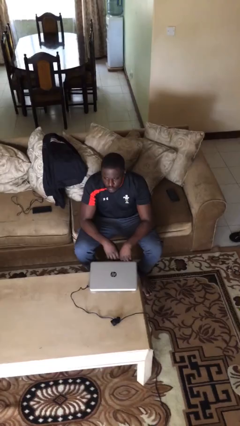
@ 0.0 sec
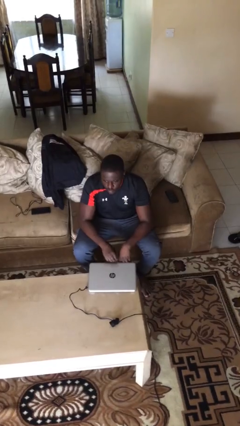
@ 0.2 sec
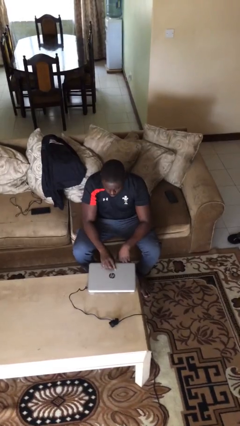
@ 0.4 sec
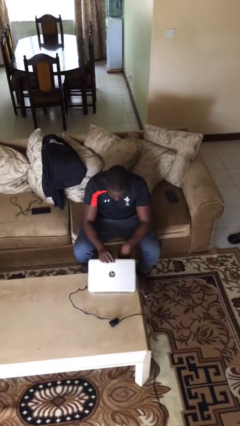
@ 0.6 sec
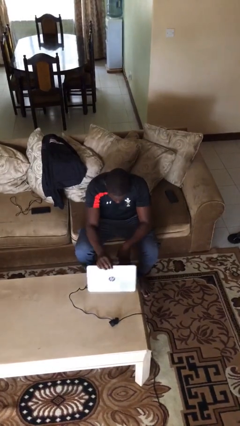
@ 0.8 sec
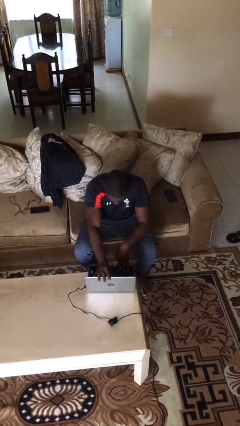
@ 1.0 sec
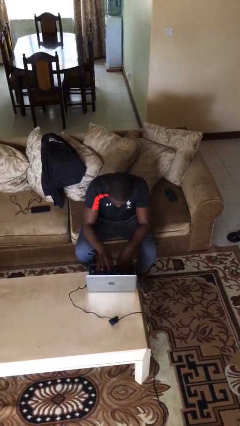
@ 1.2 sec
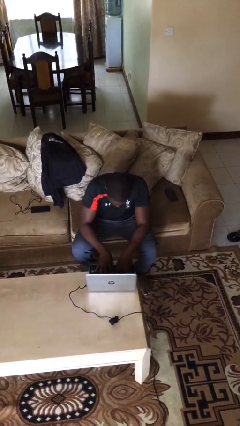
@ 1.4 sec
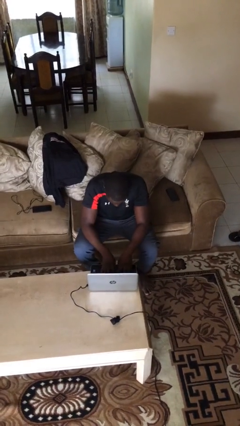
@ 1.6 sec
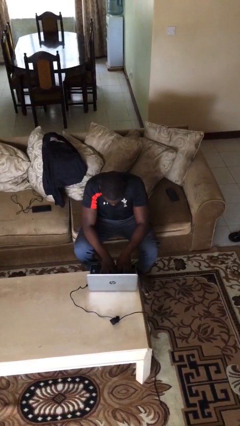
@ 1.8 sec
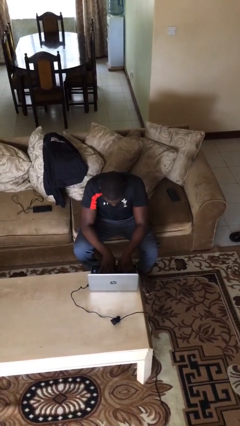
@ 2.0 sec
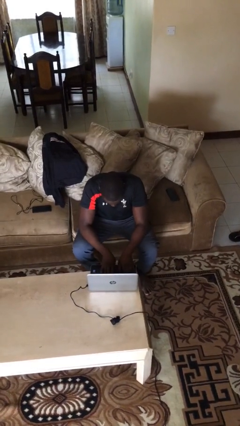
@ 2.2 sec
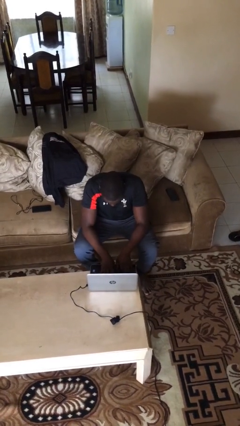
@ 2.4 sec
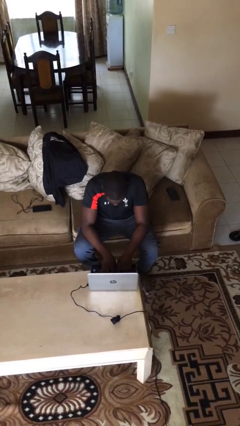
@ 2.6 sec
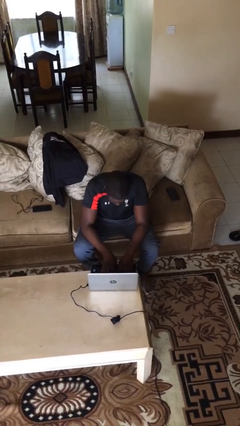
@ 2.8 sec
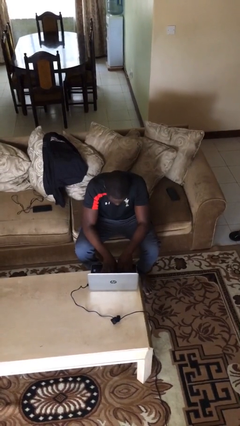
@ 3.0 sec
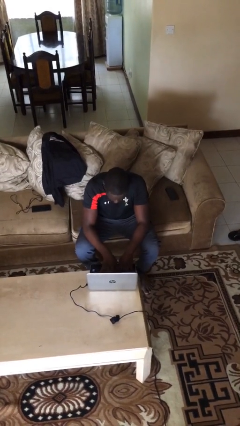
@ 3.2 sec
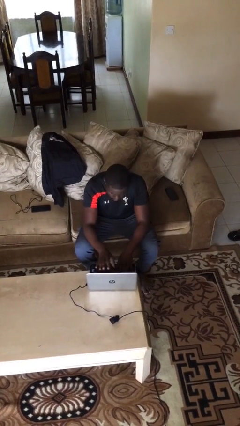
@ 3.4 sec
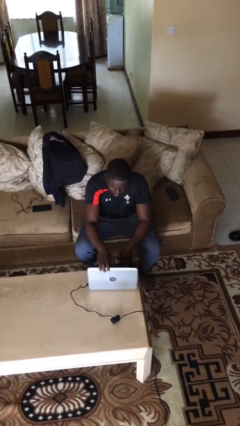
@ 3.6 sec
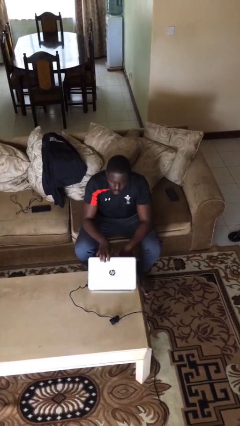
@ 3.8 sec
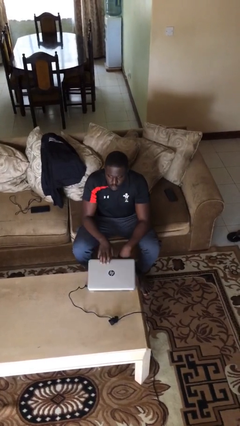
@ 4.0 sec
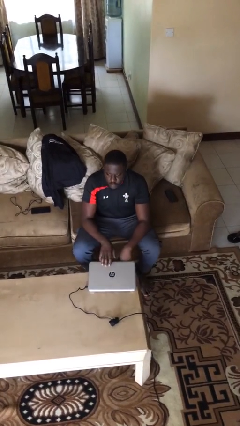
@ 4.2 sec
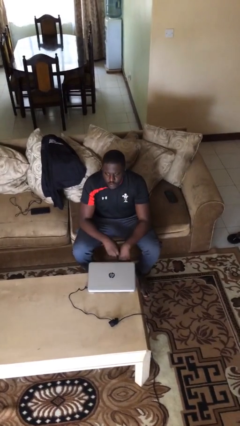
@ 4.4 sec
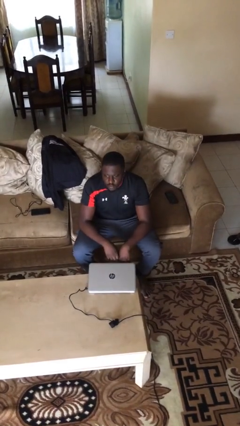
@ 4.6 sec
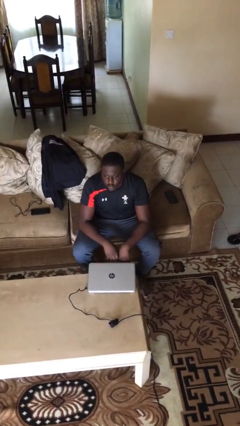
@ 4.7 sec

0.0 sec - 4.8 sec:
person interacts with laptop

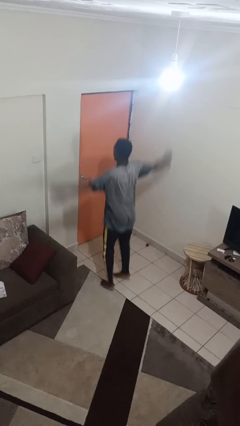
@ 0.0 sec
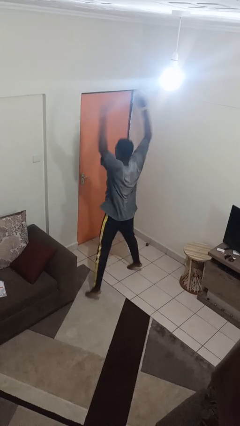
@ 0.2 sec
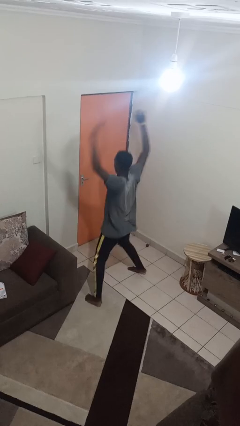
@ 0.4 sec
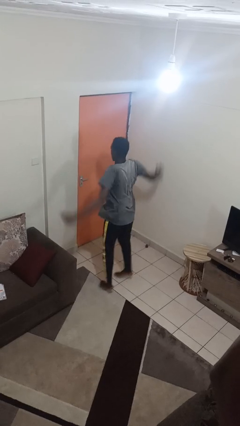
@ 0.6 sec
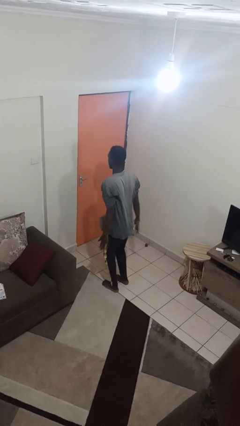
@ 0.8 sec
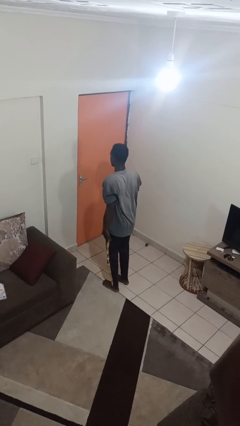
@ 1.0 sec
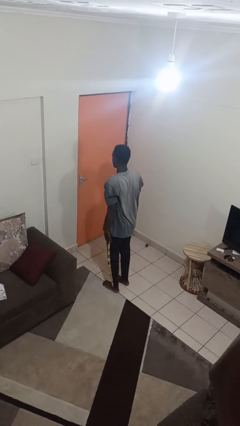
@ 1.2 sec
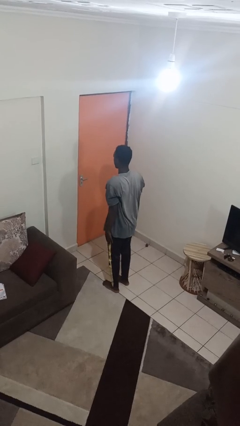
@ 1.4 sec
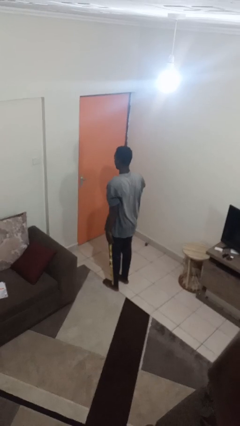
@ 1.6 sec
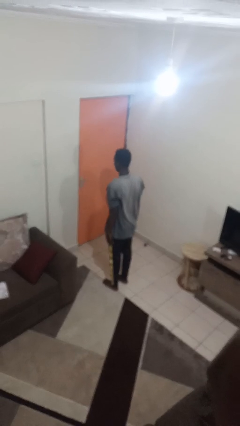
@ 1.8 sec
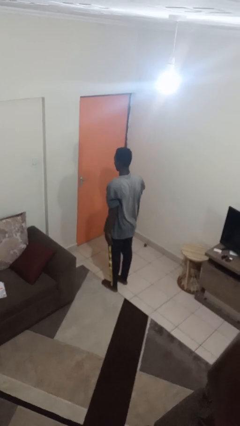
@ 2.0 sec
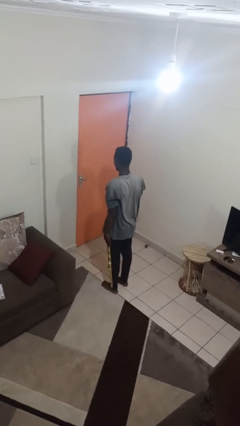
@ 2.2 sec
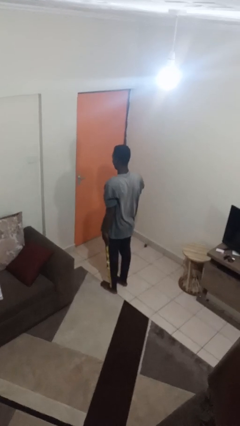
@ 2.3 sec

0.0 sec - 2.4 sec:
person exercises with jumping jacks

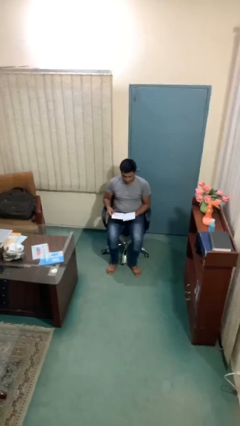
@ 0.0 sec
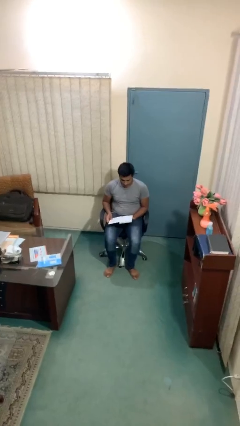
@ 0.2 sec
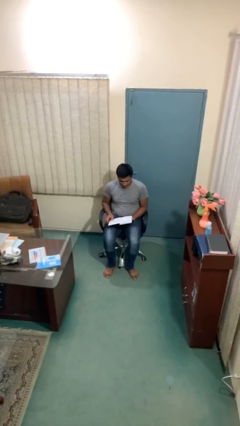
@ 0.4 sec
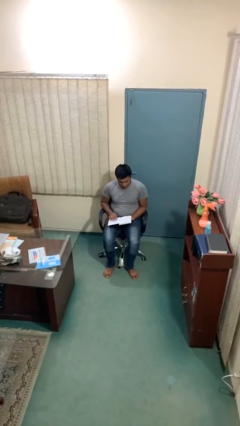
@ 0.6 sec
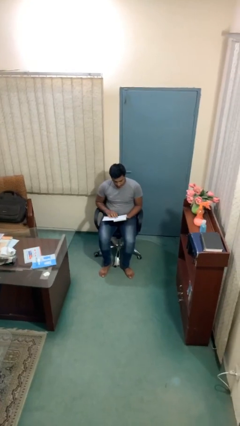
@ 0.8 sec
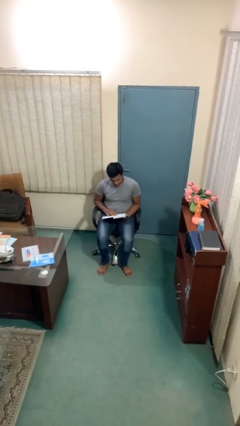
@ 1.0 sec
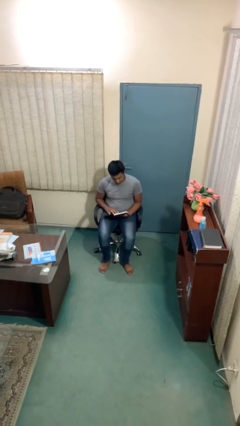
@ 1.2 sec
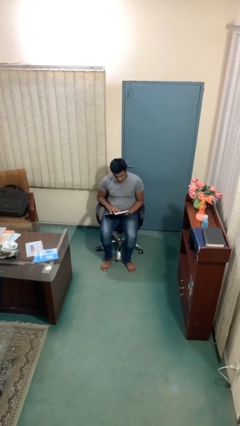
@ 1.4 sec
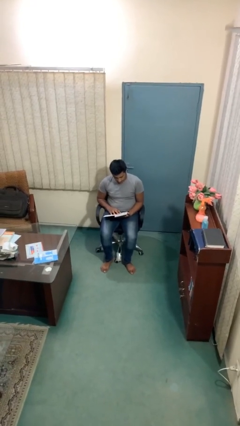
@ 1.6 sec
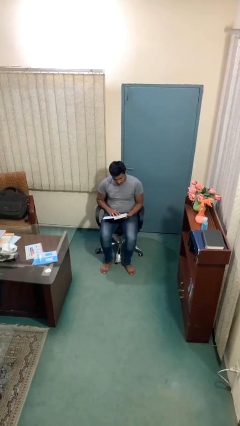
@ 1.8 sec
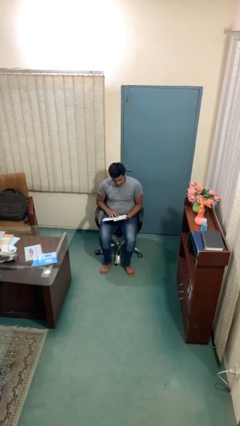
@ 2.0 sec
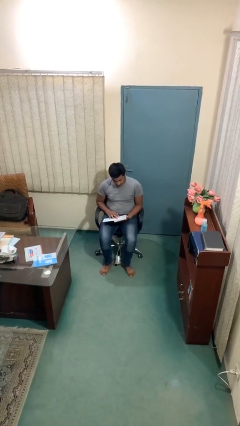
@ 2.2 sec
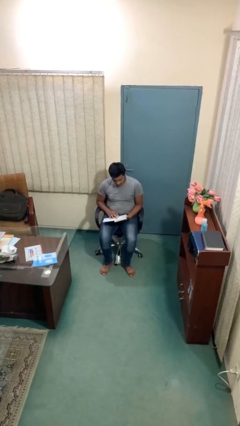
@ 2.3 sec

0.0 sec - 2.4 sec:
person reads document

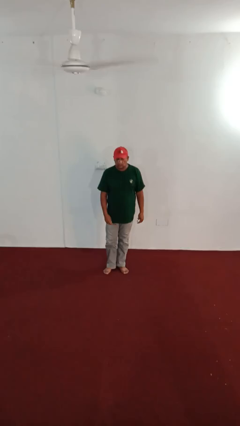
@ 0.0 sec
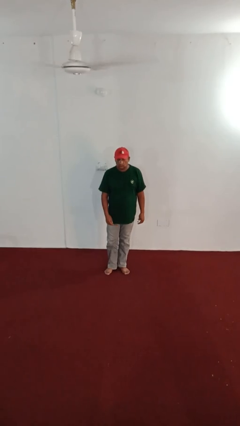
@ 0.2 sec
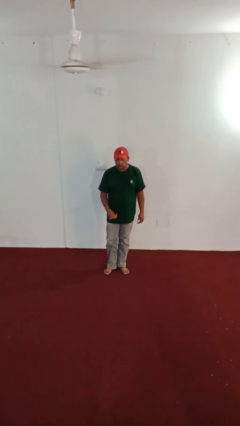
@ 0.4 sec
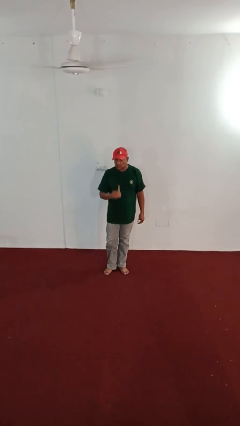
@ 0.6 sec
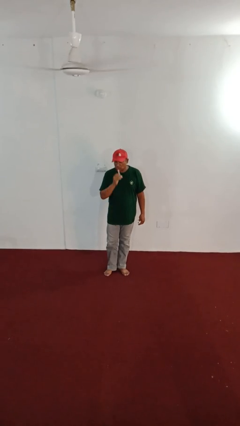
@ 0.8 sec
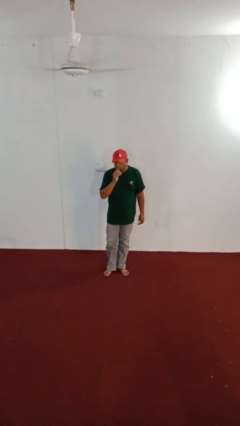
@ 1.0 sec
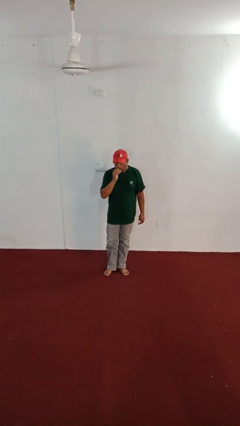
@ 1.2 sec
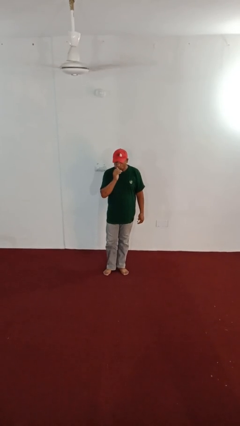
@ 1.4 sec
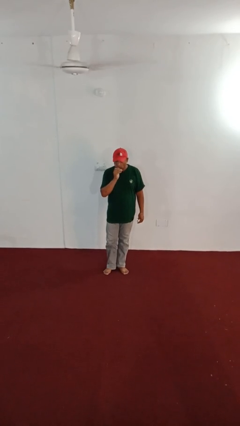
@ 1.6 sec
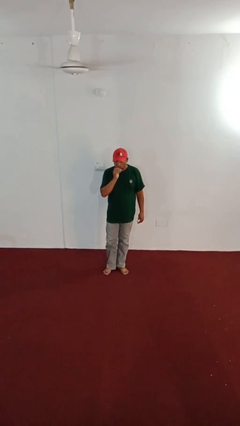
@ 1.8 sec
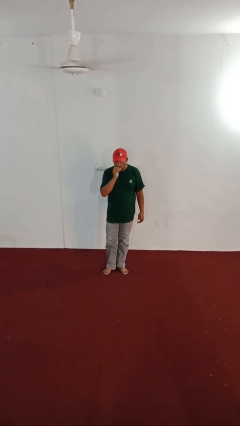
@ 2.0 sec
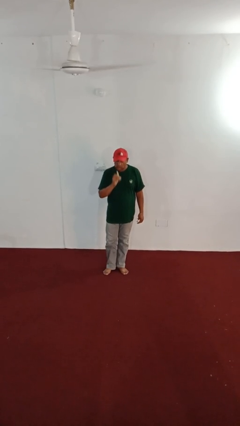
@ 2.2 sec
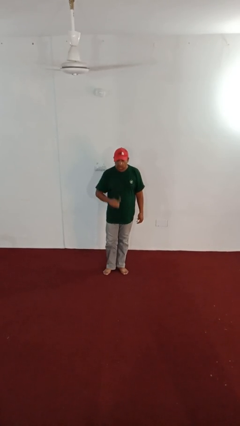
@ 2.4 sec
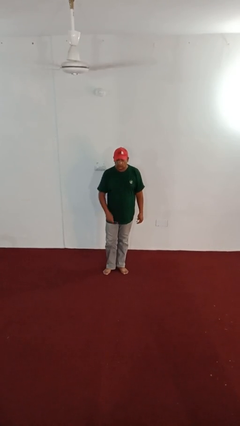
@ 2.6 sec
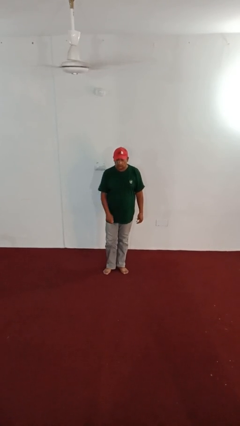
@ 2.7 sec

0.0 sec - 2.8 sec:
person brushes teeth

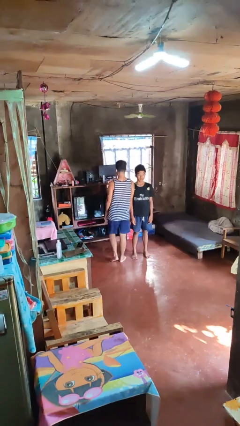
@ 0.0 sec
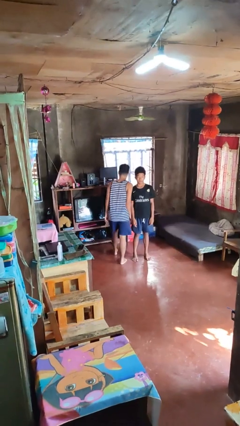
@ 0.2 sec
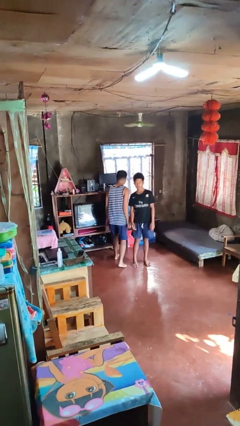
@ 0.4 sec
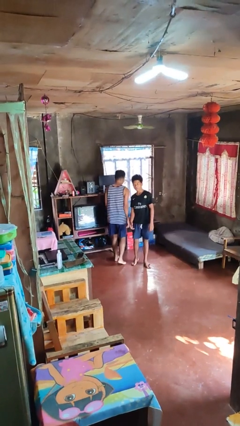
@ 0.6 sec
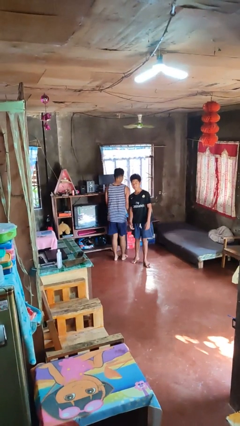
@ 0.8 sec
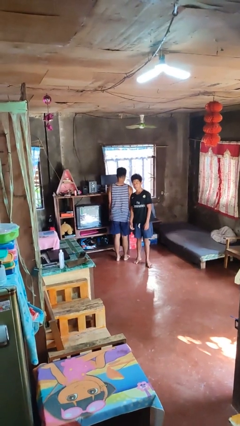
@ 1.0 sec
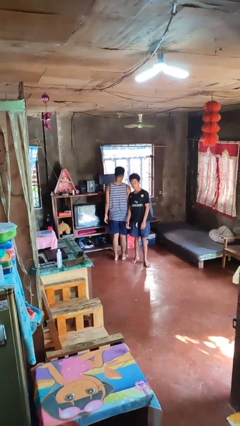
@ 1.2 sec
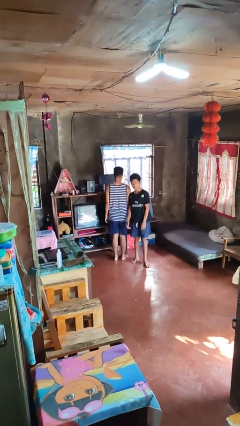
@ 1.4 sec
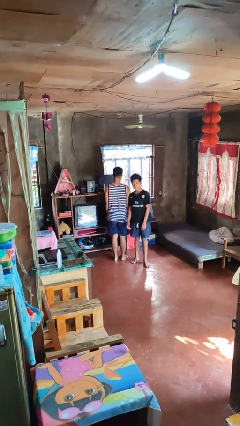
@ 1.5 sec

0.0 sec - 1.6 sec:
person bumps into person

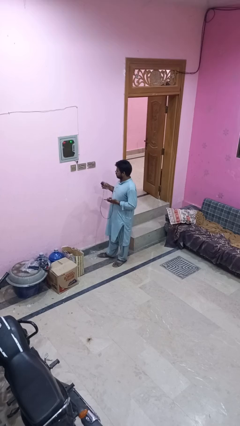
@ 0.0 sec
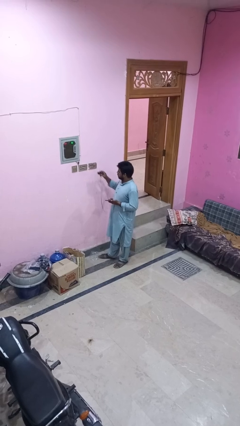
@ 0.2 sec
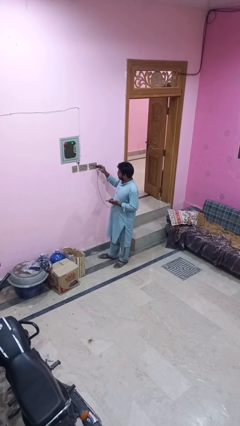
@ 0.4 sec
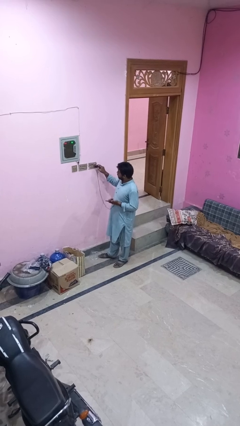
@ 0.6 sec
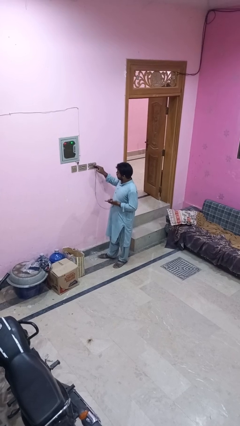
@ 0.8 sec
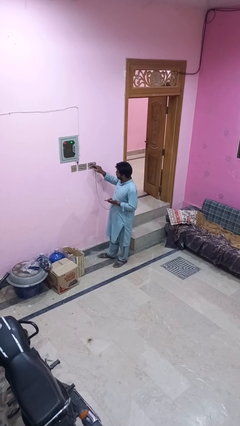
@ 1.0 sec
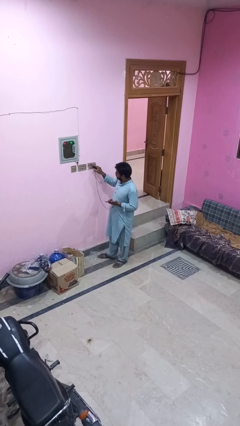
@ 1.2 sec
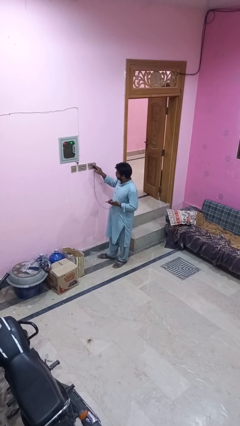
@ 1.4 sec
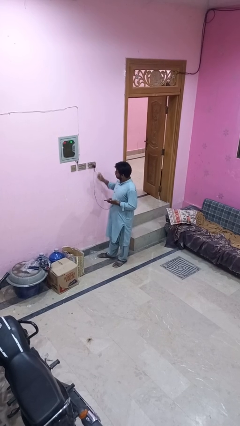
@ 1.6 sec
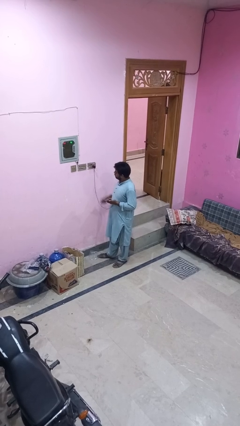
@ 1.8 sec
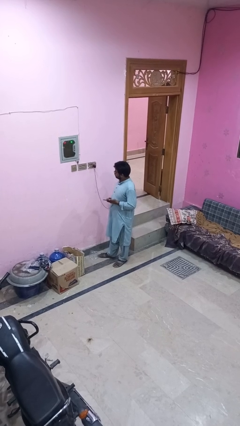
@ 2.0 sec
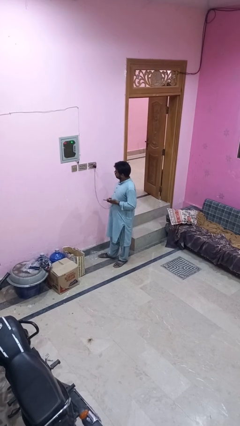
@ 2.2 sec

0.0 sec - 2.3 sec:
person plugs into electrical socket

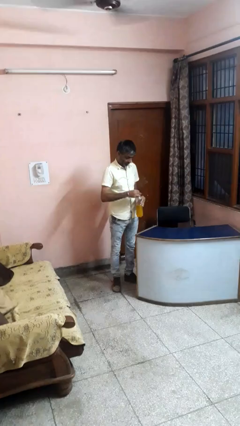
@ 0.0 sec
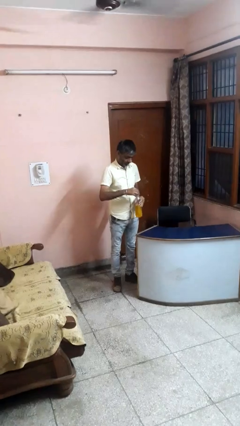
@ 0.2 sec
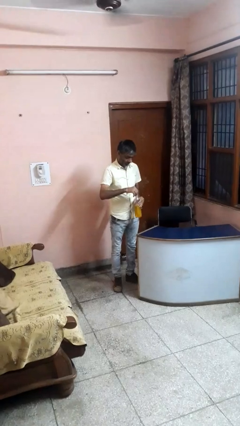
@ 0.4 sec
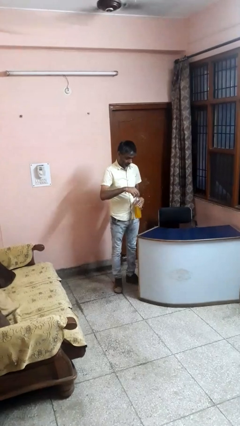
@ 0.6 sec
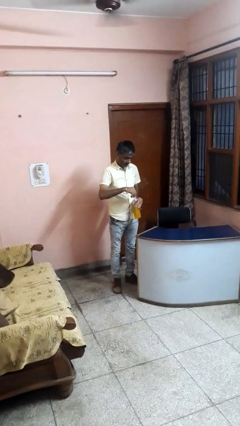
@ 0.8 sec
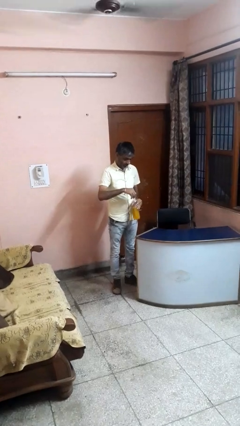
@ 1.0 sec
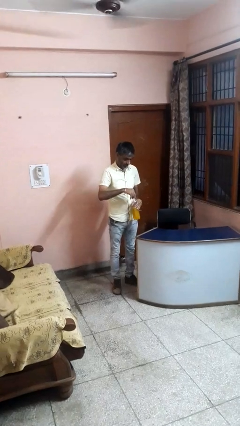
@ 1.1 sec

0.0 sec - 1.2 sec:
person screws lid to bottle
